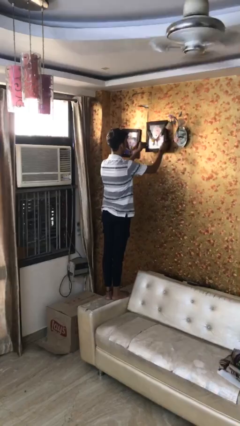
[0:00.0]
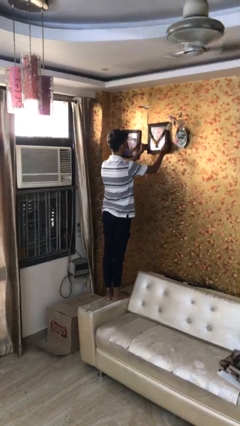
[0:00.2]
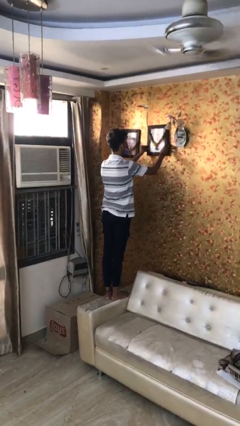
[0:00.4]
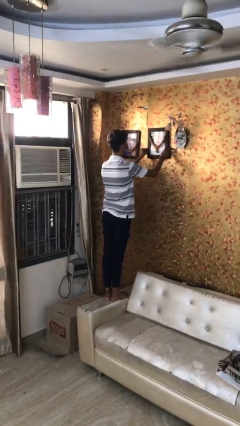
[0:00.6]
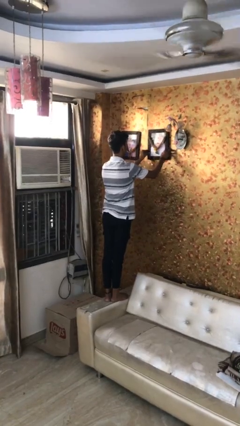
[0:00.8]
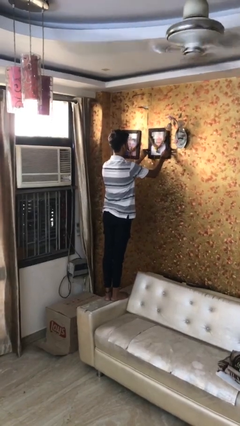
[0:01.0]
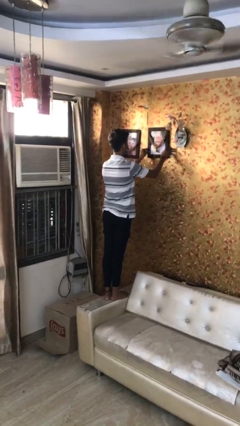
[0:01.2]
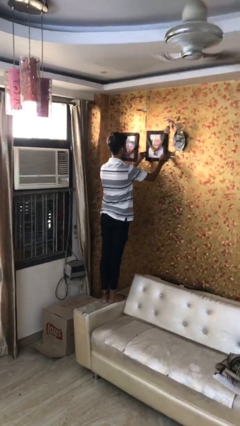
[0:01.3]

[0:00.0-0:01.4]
person puts up picture frame

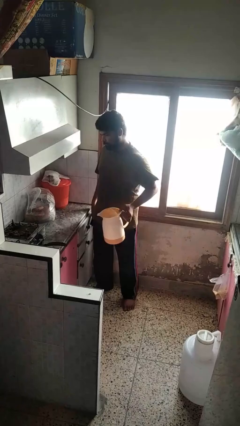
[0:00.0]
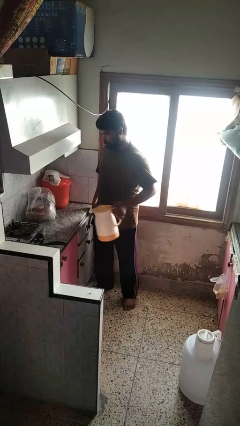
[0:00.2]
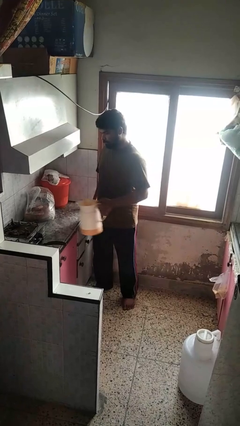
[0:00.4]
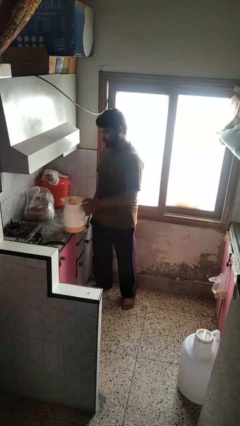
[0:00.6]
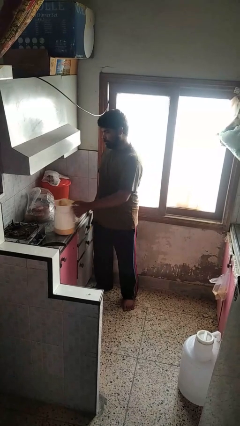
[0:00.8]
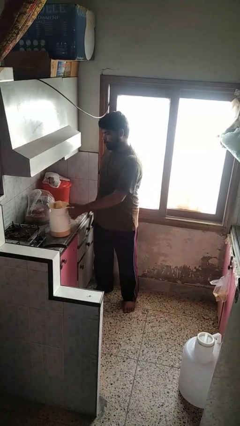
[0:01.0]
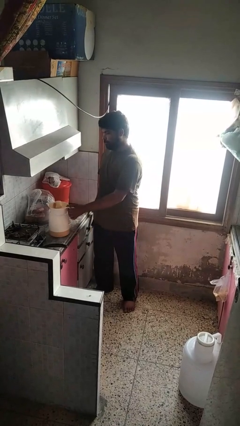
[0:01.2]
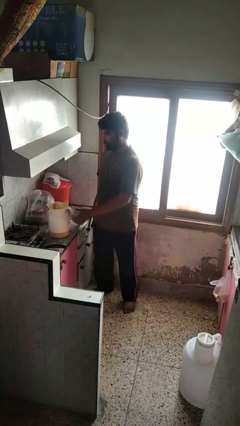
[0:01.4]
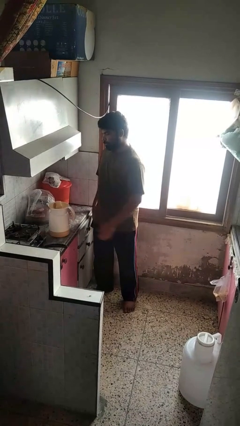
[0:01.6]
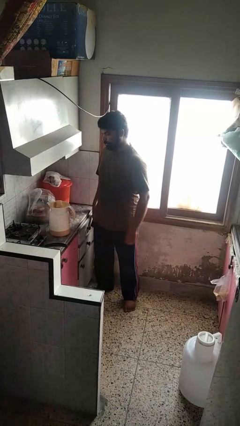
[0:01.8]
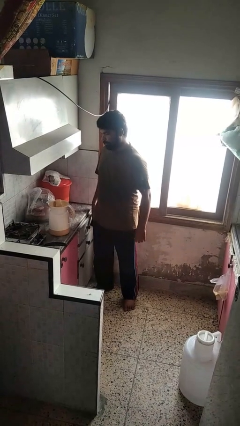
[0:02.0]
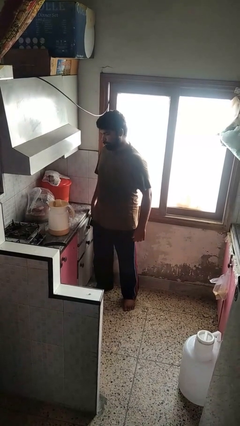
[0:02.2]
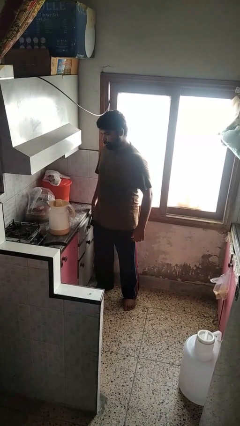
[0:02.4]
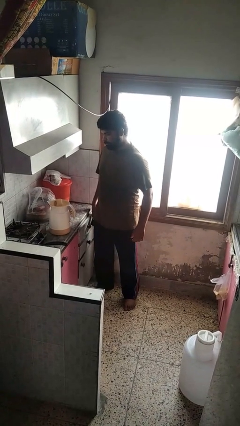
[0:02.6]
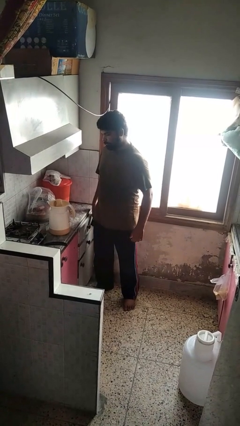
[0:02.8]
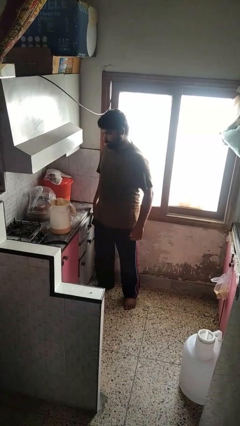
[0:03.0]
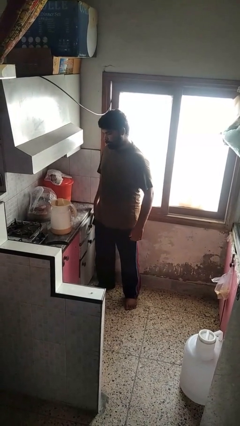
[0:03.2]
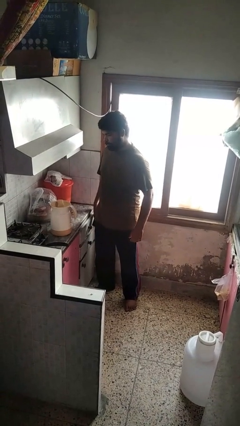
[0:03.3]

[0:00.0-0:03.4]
person puts down object on countertop

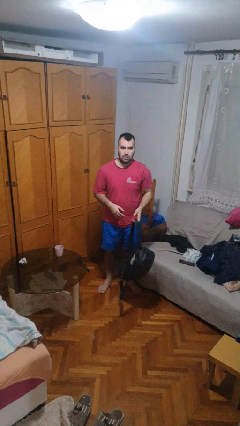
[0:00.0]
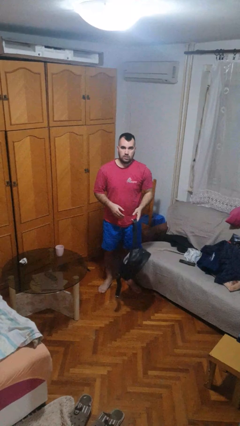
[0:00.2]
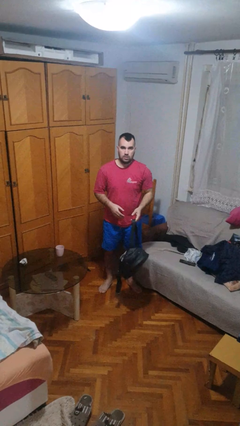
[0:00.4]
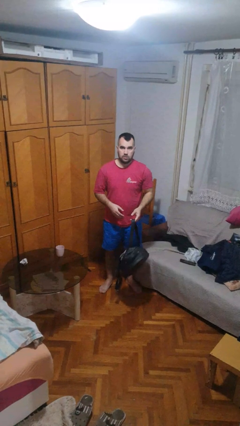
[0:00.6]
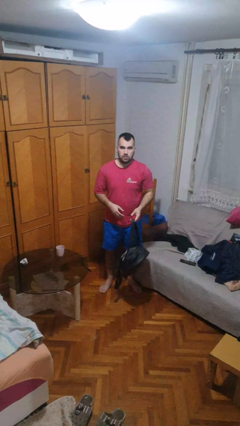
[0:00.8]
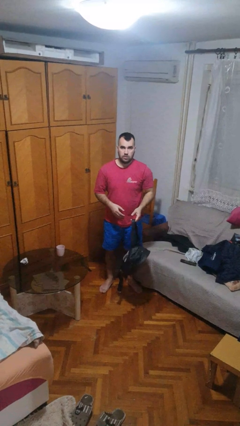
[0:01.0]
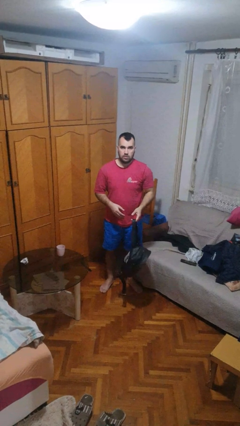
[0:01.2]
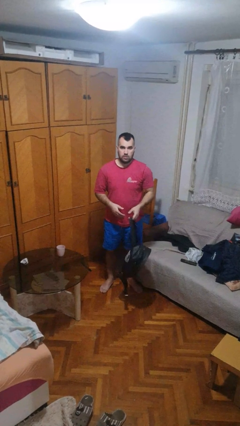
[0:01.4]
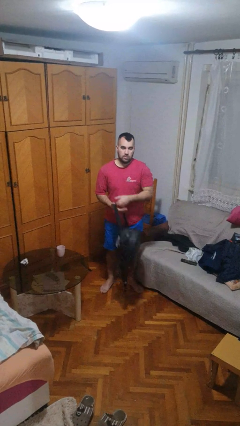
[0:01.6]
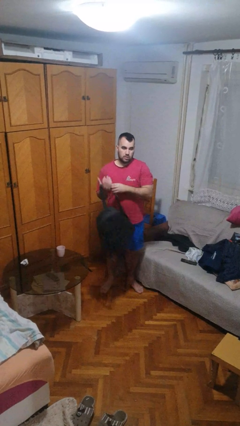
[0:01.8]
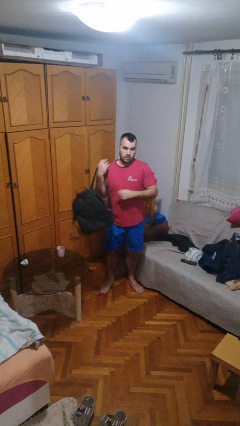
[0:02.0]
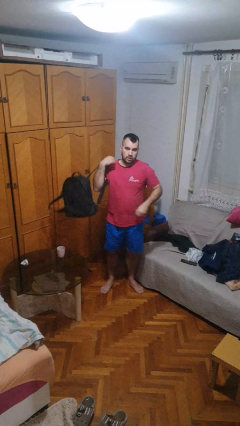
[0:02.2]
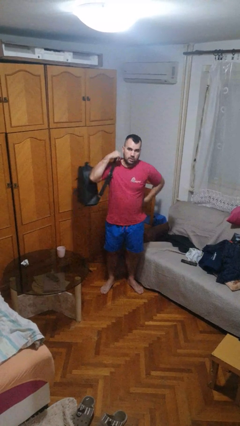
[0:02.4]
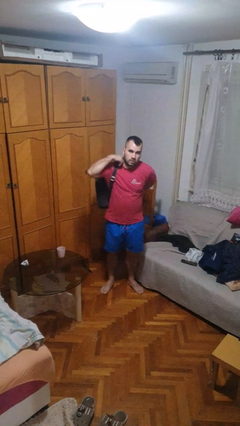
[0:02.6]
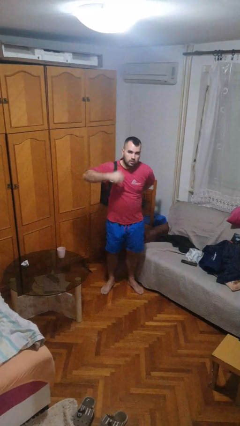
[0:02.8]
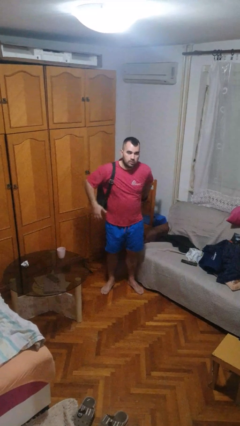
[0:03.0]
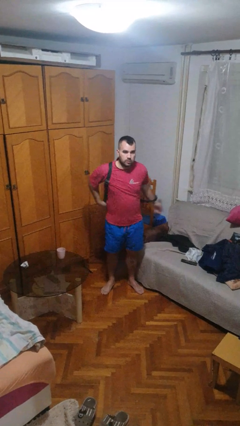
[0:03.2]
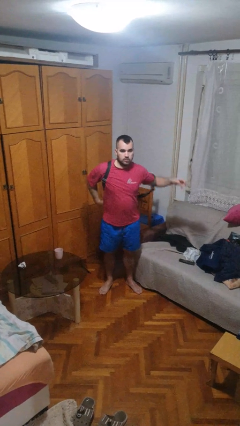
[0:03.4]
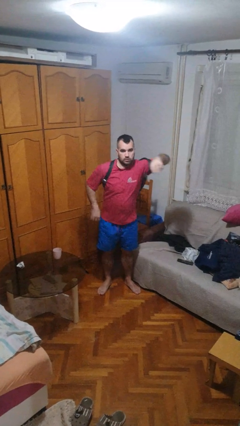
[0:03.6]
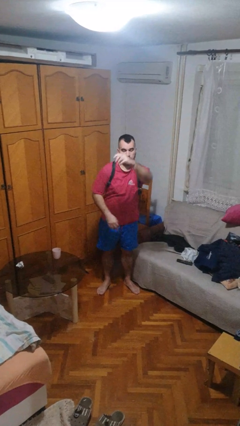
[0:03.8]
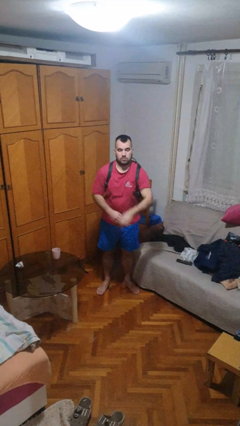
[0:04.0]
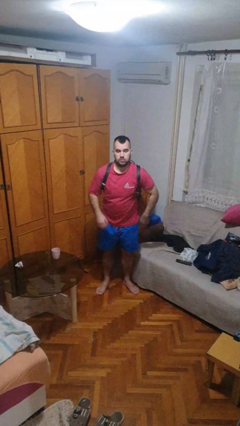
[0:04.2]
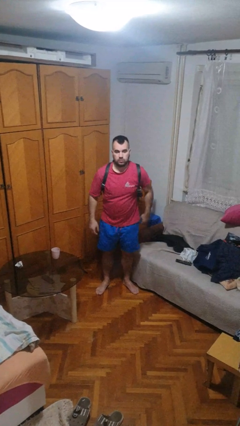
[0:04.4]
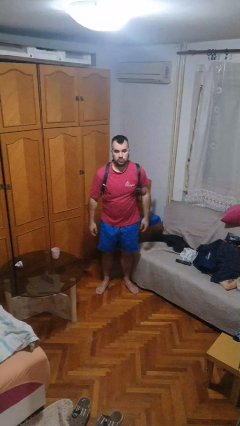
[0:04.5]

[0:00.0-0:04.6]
person puts on backpack

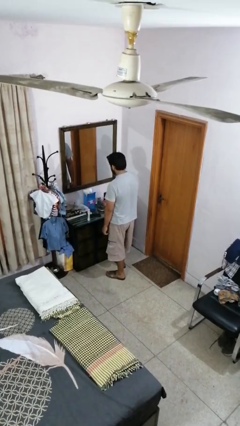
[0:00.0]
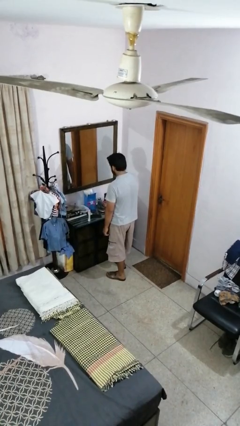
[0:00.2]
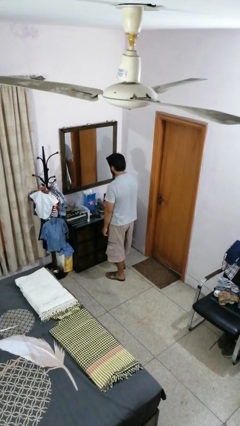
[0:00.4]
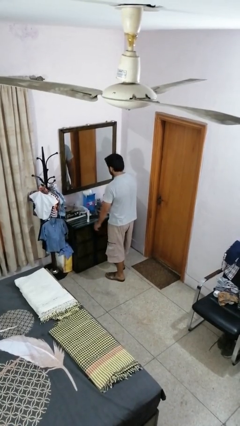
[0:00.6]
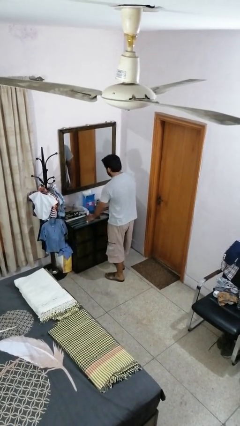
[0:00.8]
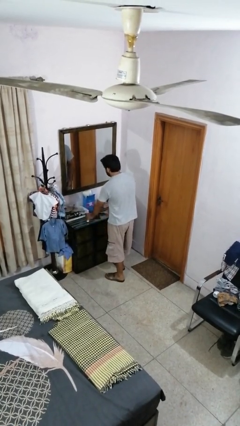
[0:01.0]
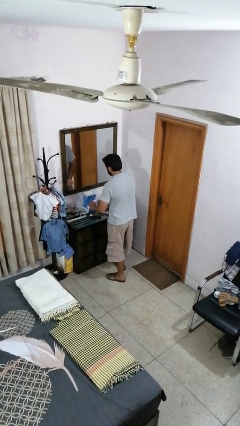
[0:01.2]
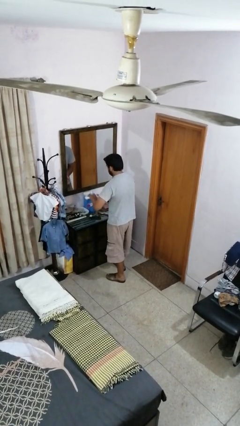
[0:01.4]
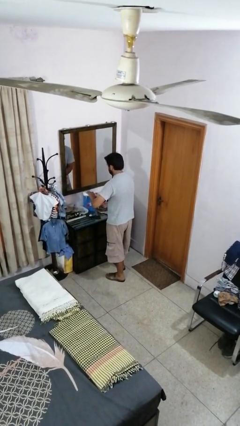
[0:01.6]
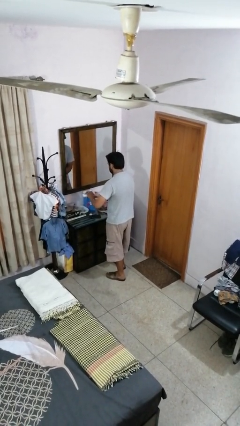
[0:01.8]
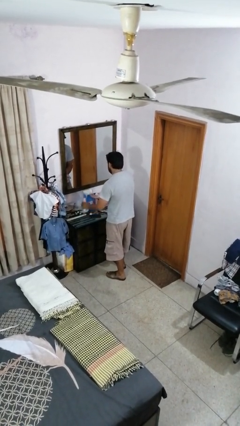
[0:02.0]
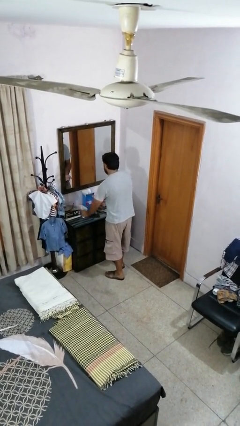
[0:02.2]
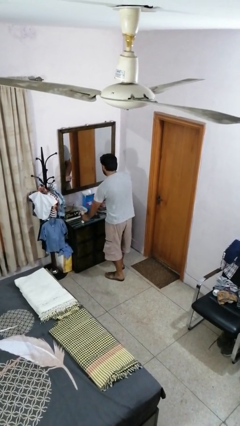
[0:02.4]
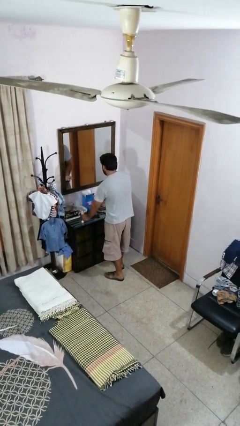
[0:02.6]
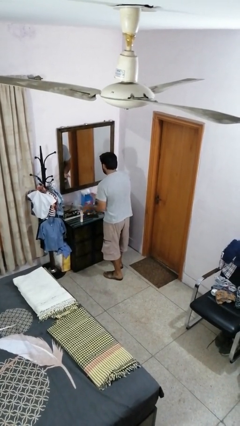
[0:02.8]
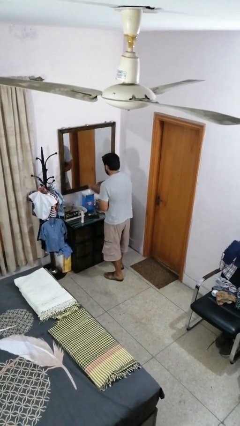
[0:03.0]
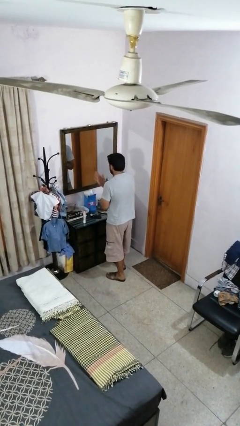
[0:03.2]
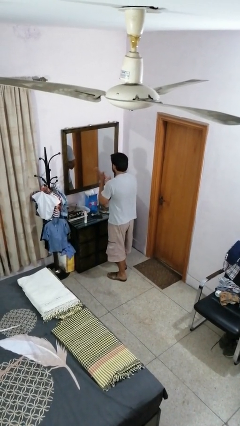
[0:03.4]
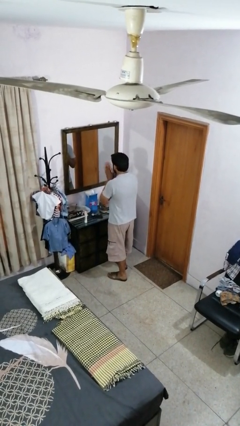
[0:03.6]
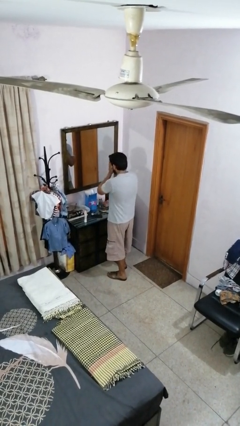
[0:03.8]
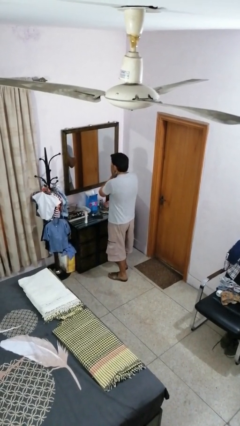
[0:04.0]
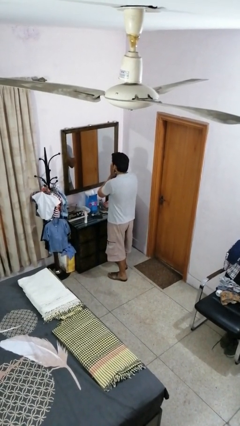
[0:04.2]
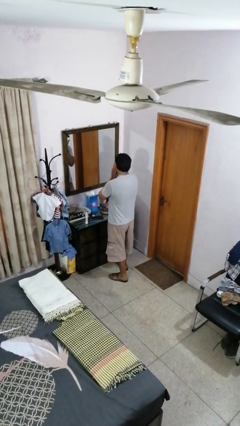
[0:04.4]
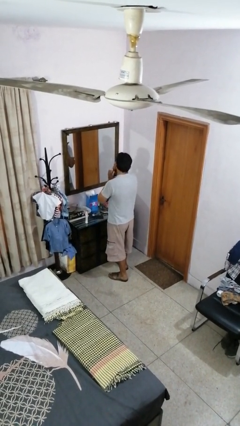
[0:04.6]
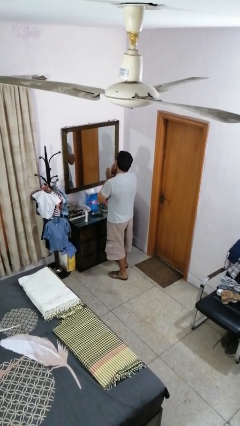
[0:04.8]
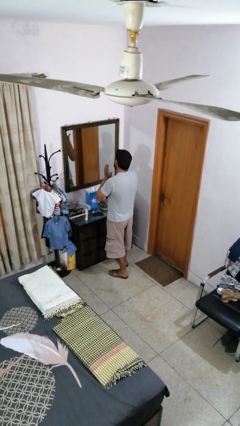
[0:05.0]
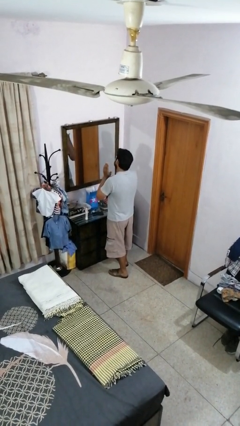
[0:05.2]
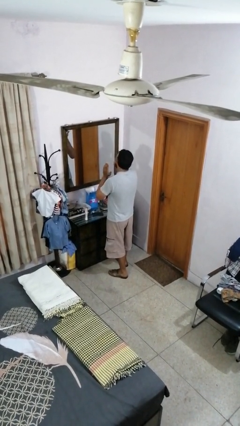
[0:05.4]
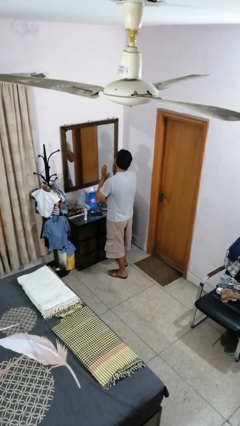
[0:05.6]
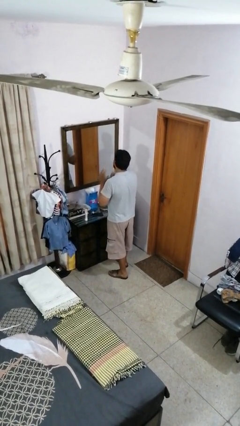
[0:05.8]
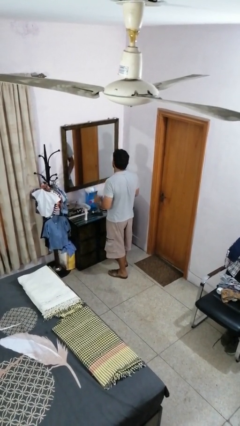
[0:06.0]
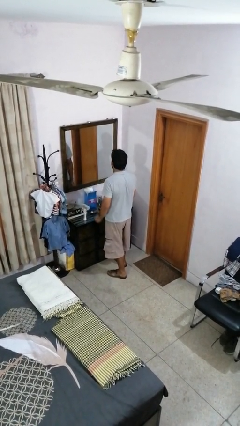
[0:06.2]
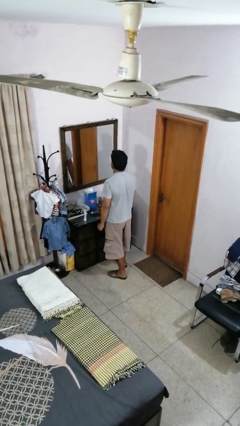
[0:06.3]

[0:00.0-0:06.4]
person applies sunscreen

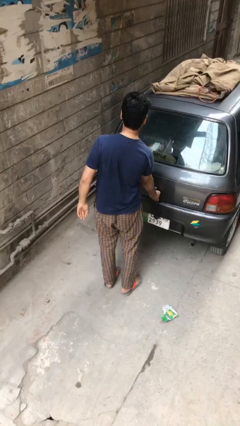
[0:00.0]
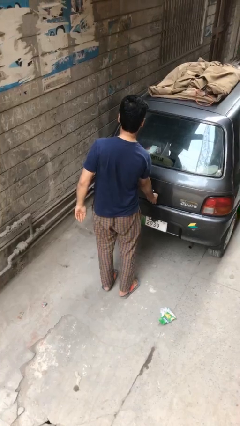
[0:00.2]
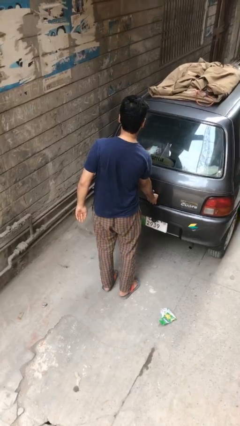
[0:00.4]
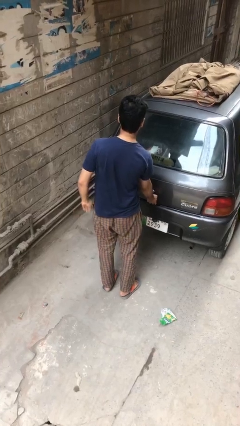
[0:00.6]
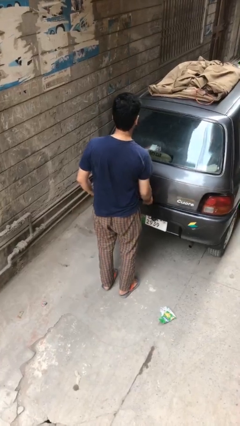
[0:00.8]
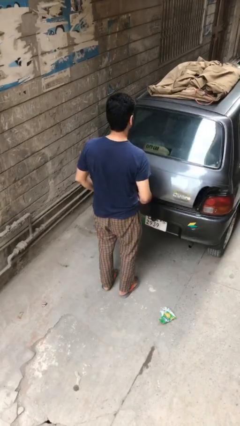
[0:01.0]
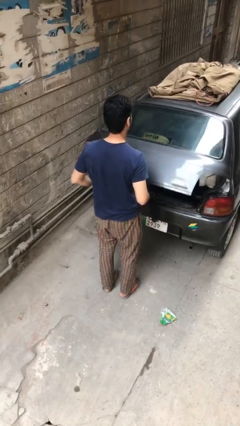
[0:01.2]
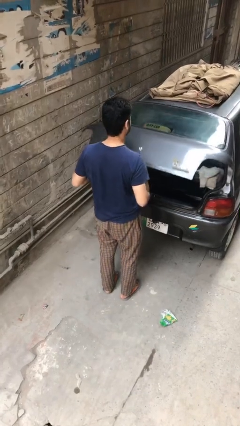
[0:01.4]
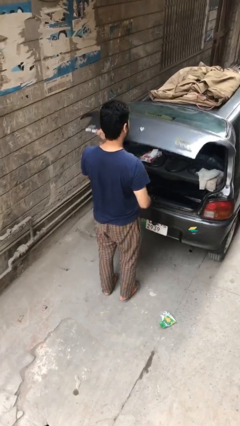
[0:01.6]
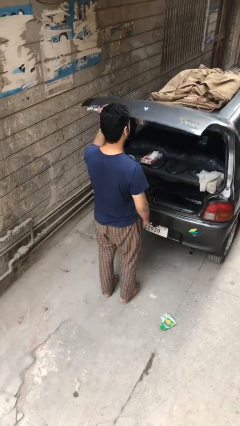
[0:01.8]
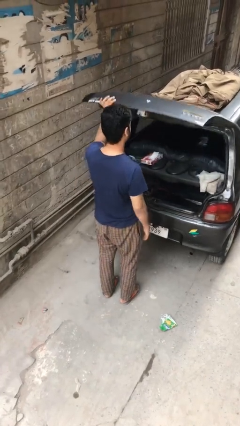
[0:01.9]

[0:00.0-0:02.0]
person opens car trunk
